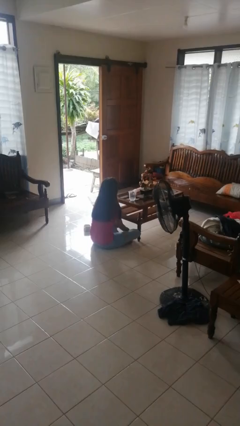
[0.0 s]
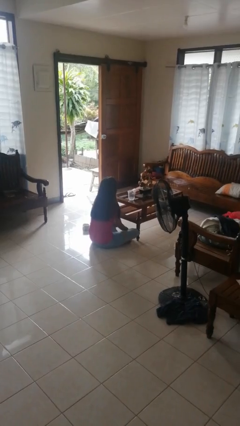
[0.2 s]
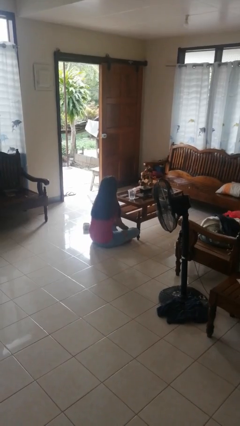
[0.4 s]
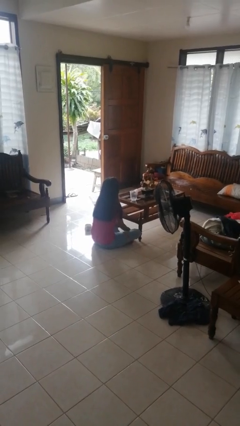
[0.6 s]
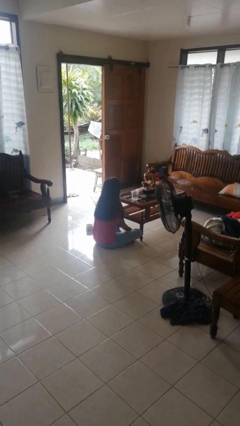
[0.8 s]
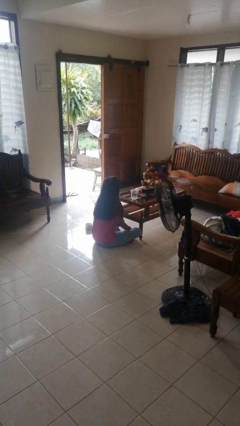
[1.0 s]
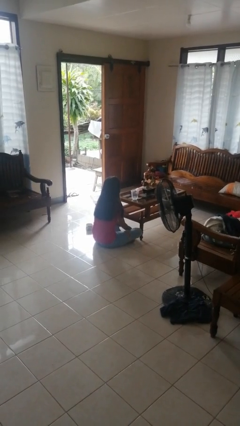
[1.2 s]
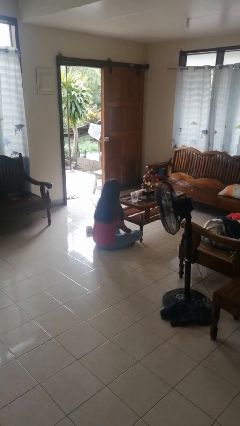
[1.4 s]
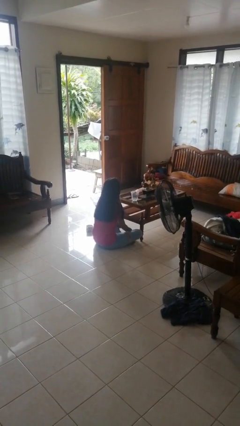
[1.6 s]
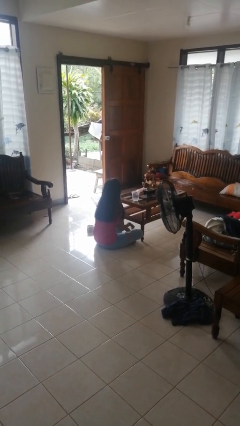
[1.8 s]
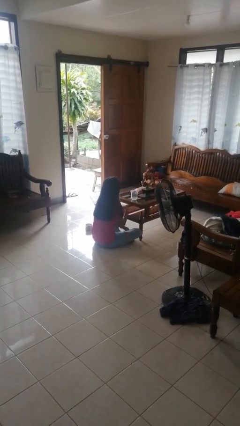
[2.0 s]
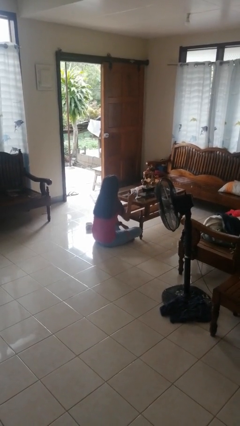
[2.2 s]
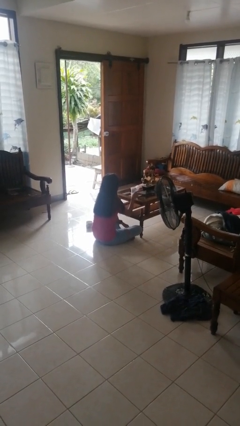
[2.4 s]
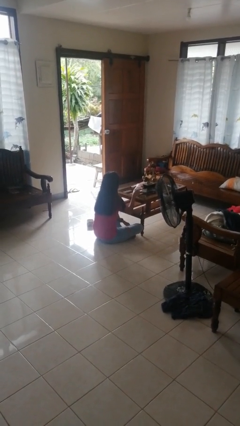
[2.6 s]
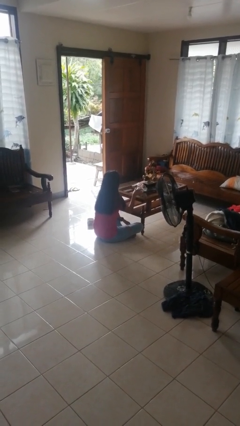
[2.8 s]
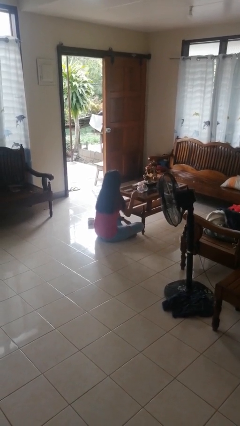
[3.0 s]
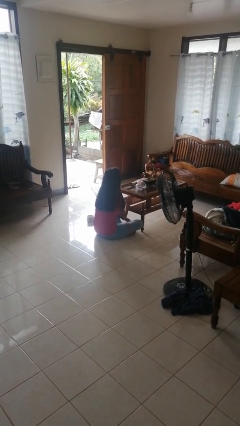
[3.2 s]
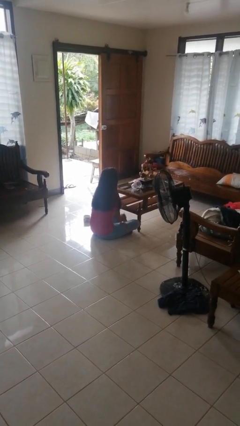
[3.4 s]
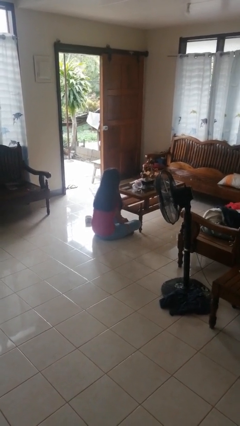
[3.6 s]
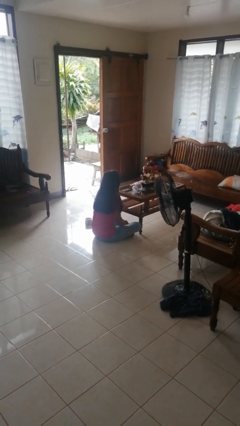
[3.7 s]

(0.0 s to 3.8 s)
person knocks over glass

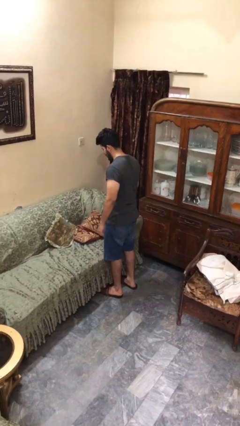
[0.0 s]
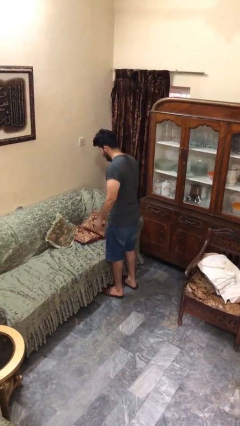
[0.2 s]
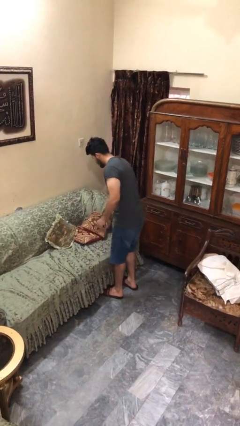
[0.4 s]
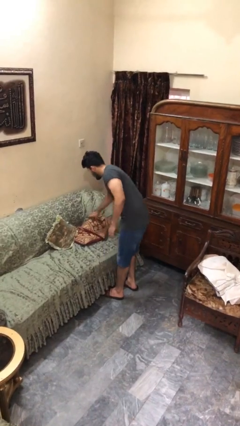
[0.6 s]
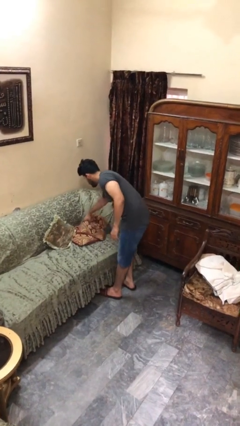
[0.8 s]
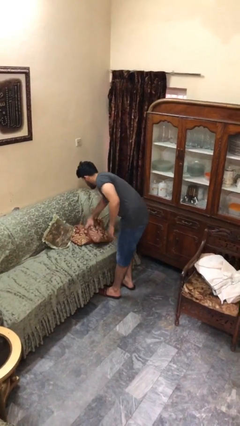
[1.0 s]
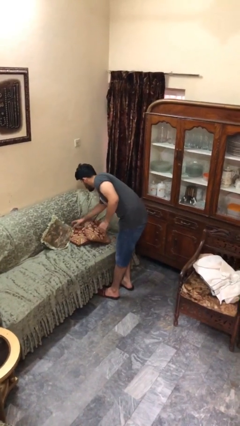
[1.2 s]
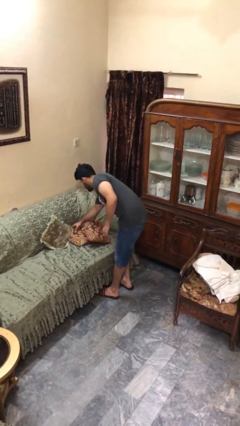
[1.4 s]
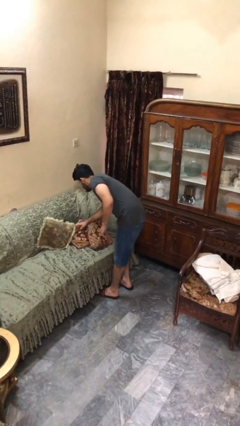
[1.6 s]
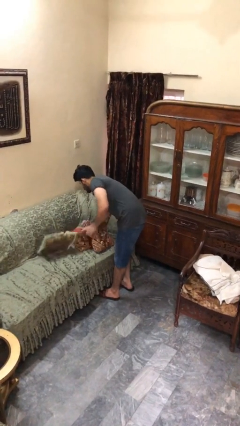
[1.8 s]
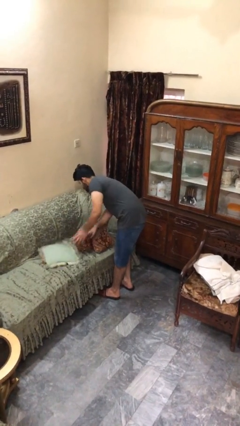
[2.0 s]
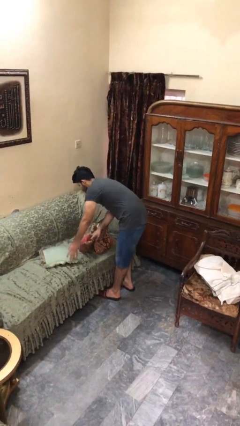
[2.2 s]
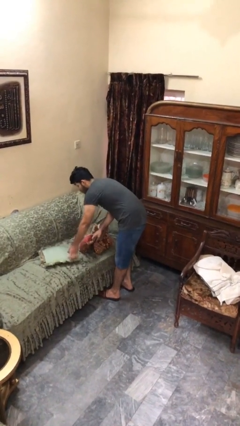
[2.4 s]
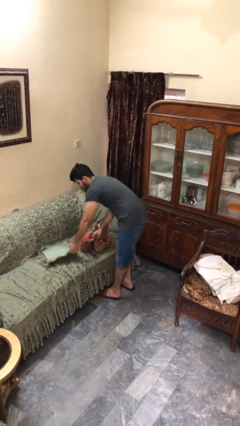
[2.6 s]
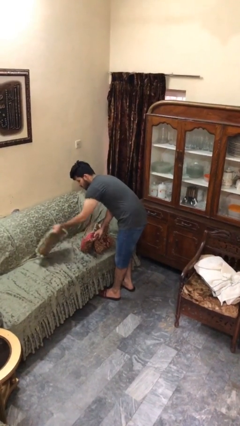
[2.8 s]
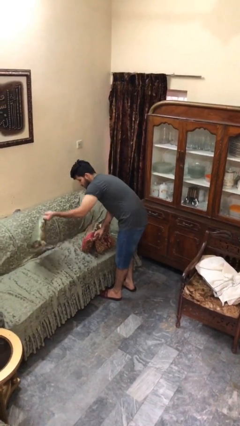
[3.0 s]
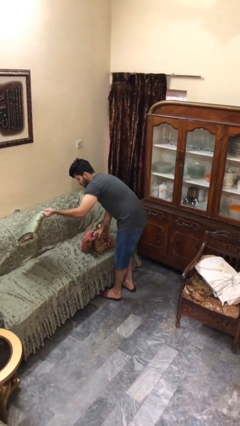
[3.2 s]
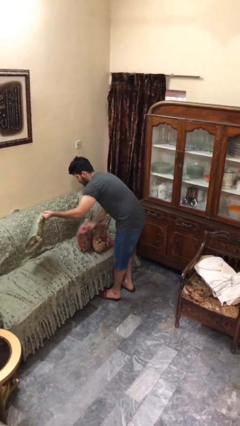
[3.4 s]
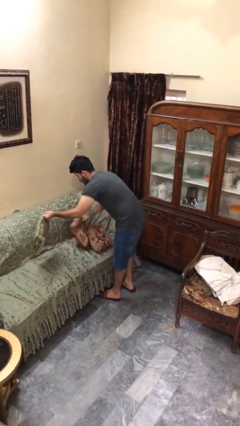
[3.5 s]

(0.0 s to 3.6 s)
person searches in couch

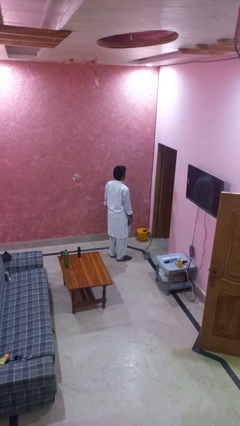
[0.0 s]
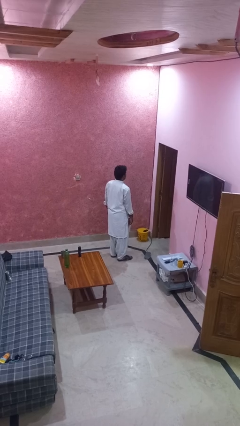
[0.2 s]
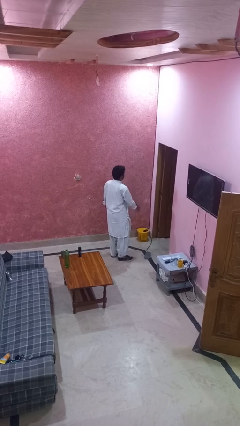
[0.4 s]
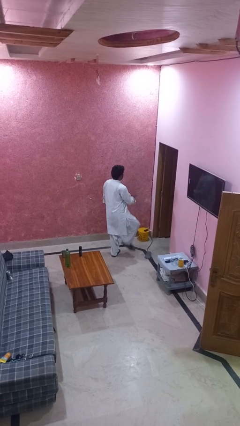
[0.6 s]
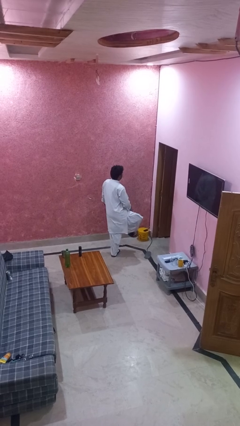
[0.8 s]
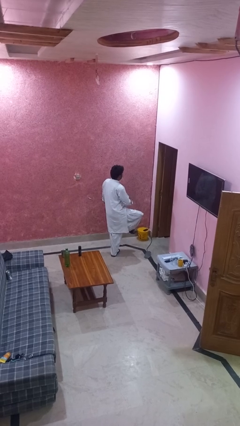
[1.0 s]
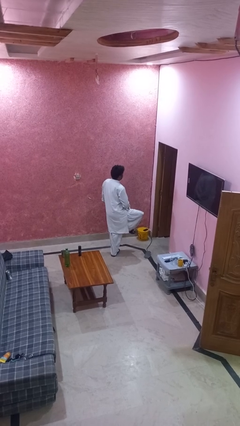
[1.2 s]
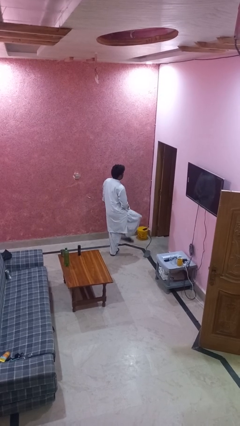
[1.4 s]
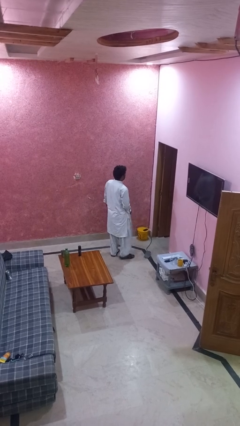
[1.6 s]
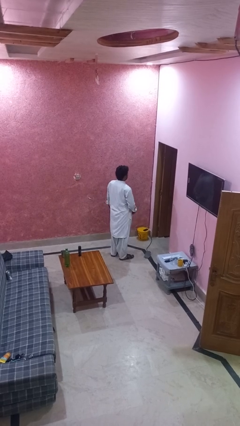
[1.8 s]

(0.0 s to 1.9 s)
person slaps hands on thighs

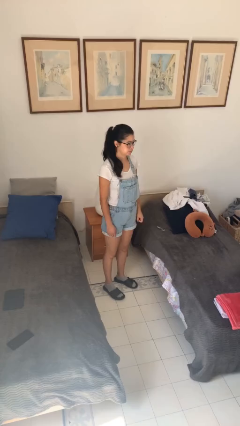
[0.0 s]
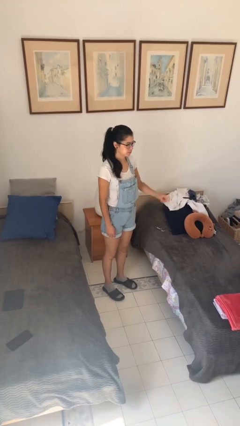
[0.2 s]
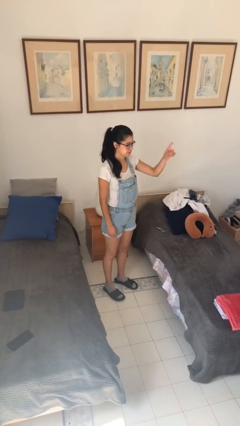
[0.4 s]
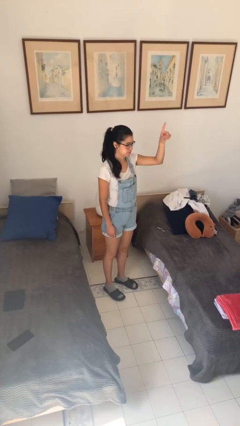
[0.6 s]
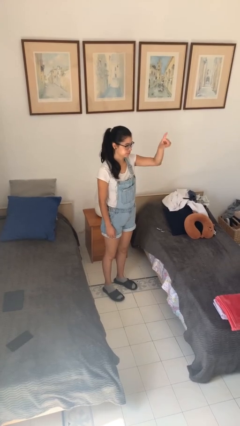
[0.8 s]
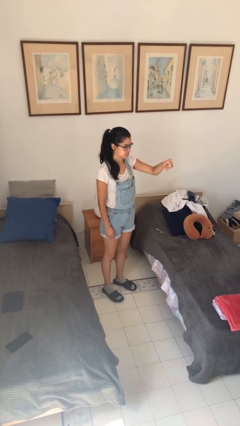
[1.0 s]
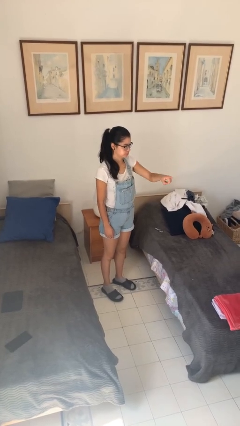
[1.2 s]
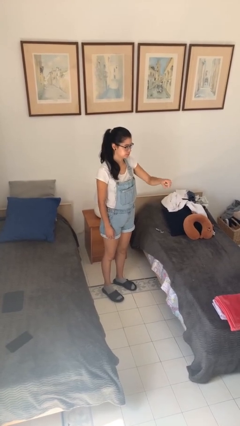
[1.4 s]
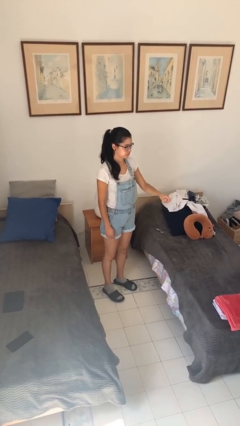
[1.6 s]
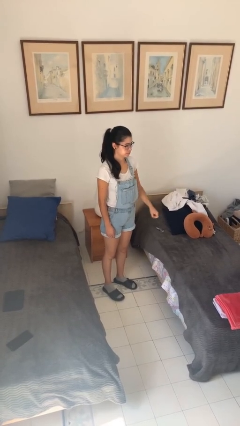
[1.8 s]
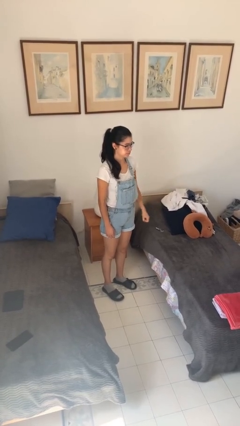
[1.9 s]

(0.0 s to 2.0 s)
person gestures number one

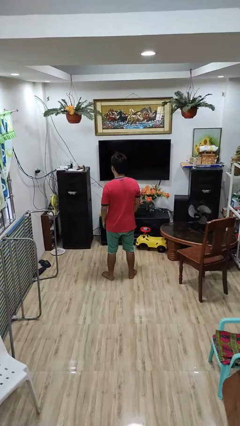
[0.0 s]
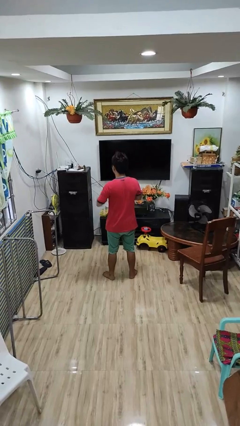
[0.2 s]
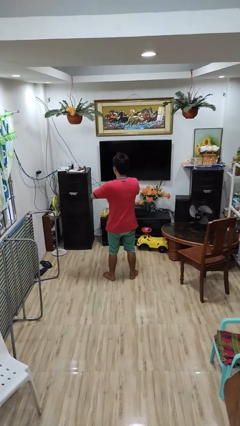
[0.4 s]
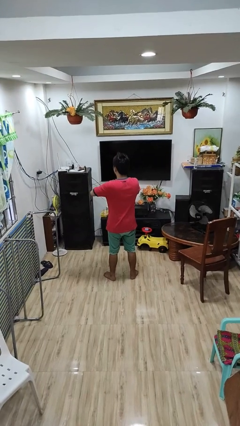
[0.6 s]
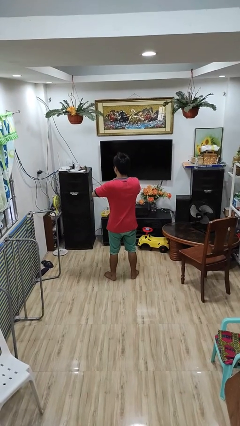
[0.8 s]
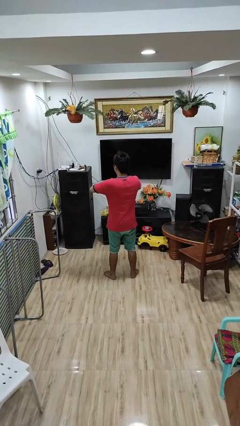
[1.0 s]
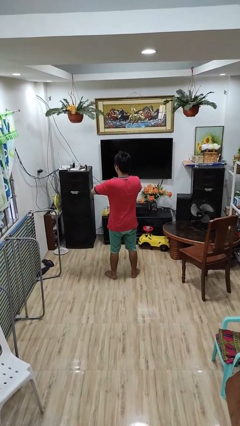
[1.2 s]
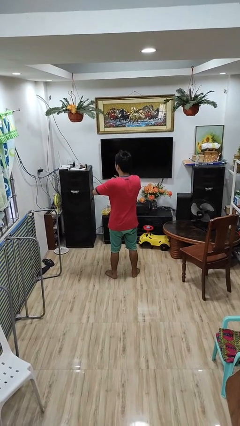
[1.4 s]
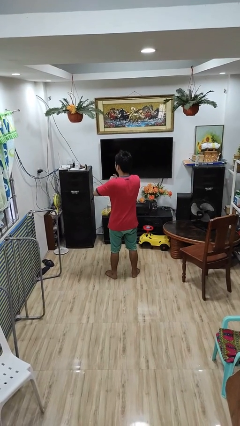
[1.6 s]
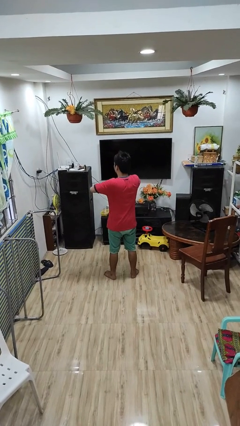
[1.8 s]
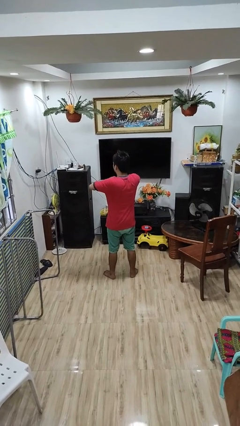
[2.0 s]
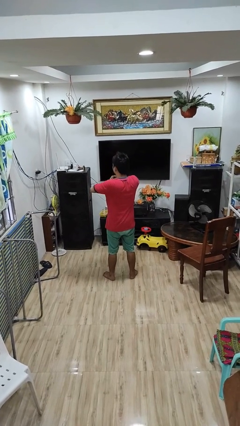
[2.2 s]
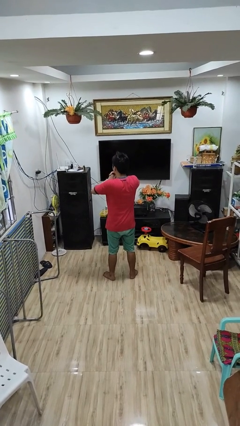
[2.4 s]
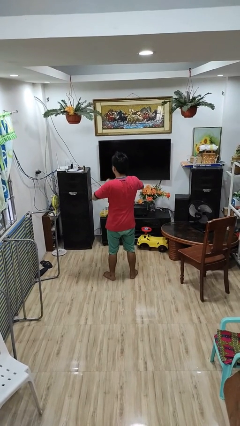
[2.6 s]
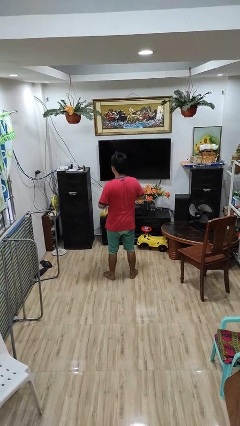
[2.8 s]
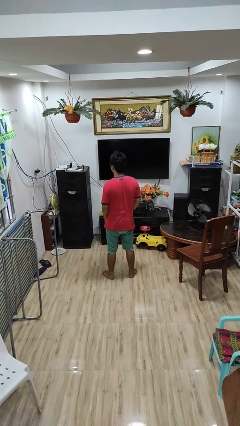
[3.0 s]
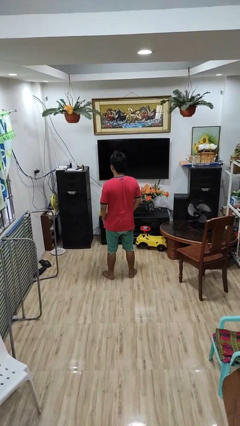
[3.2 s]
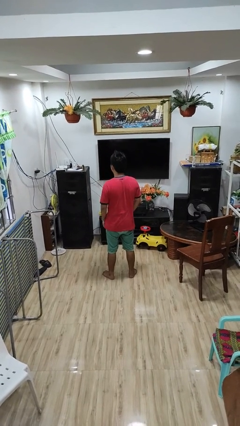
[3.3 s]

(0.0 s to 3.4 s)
person cracks knuckles

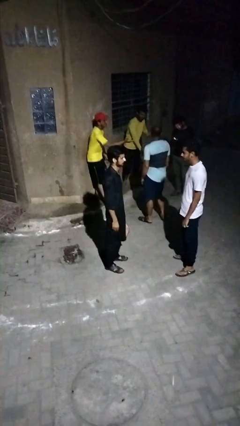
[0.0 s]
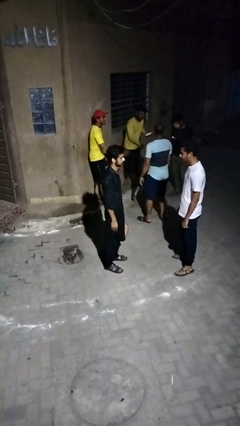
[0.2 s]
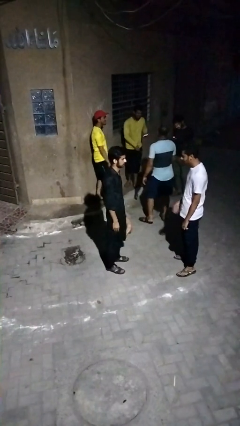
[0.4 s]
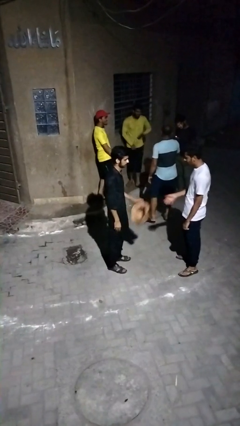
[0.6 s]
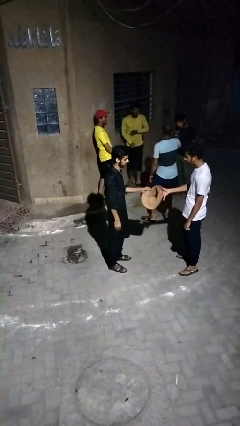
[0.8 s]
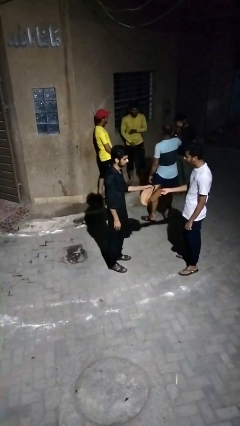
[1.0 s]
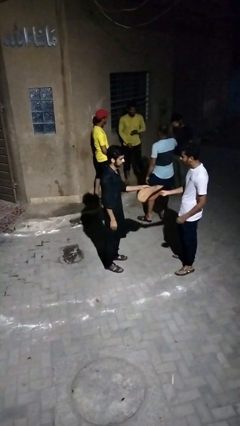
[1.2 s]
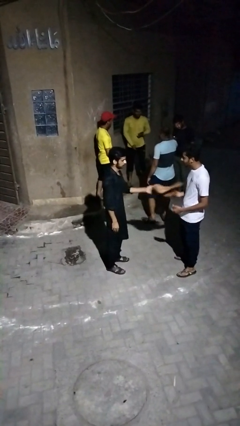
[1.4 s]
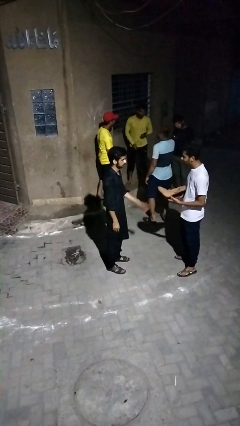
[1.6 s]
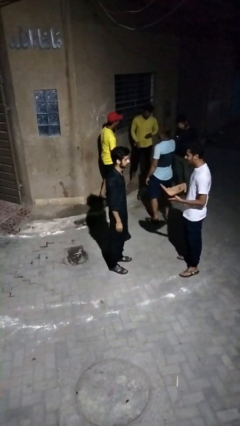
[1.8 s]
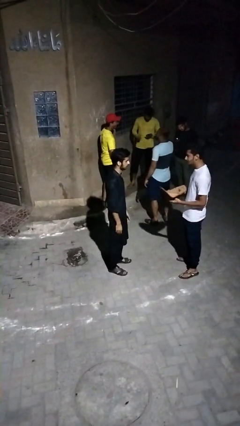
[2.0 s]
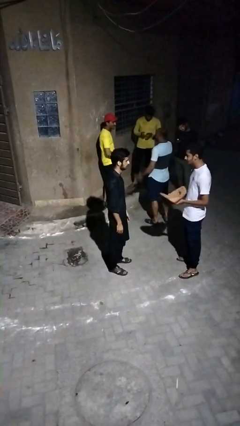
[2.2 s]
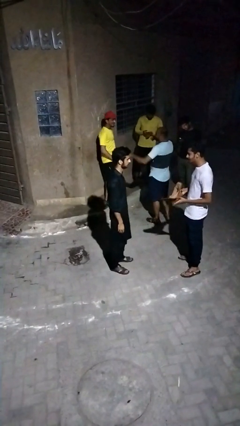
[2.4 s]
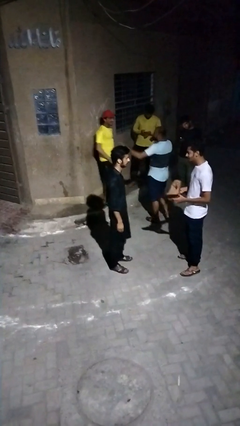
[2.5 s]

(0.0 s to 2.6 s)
person transfers object to person
